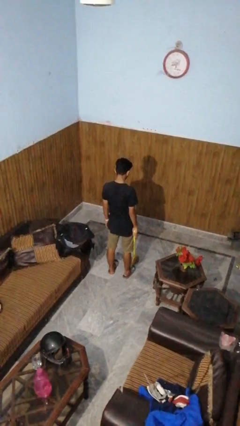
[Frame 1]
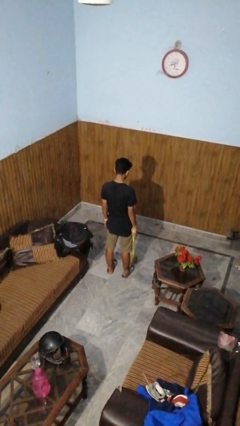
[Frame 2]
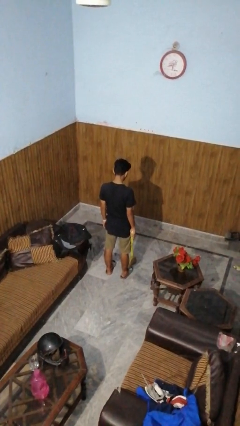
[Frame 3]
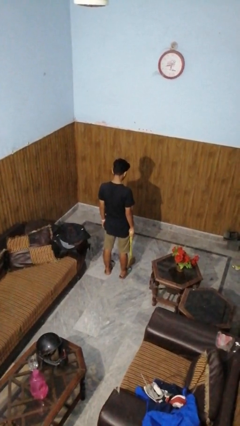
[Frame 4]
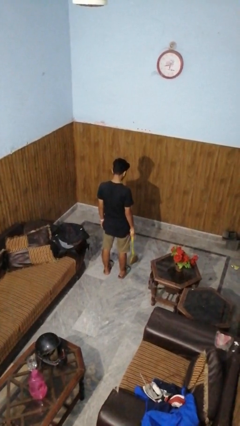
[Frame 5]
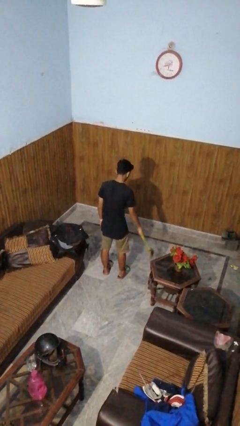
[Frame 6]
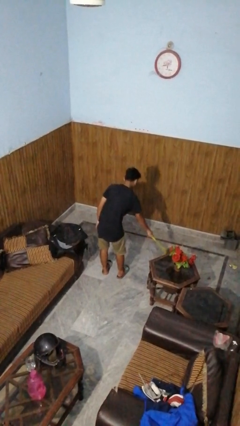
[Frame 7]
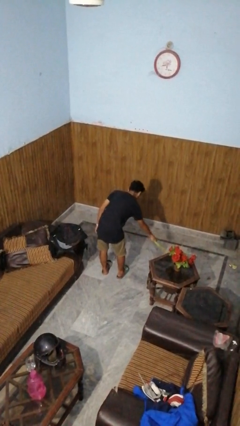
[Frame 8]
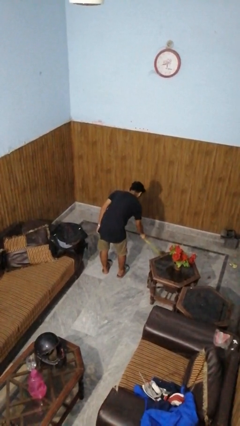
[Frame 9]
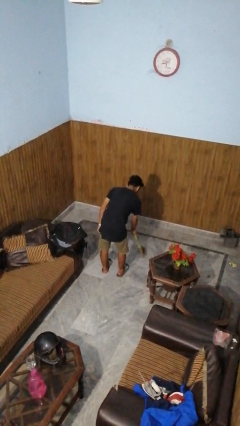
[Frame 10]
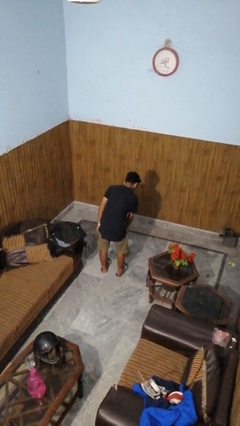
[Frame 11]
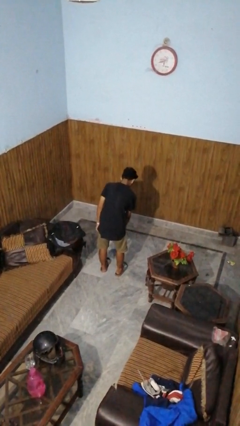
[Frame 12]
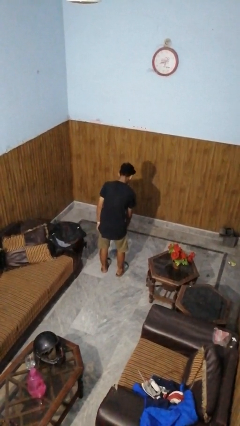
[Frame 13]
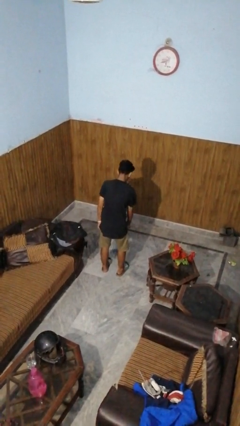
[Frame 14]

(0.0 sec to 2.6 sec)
person sweeps floor

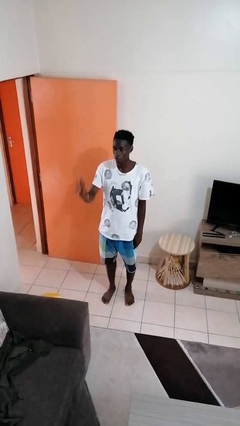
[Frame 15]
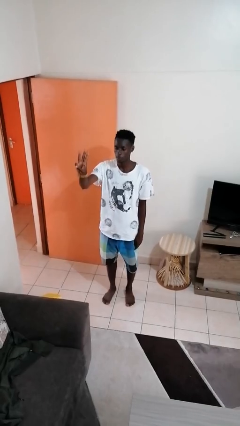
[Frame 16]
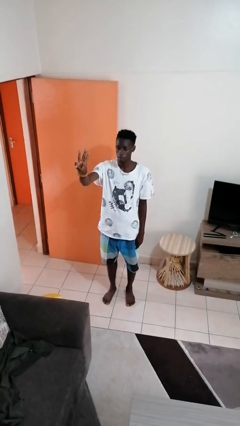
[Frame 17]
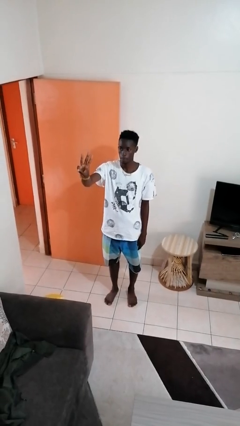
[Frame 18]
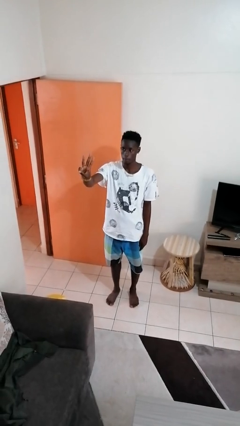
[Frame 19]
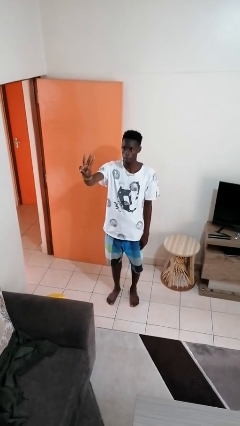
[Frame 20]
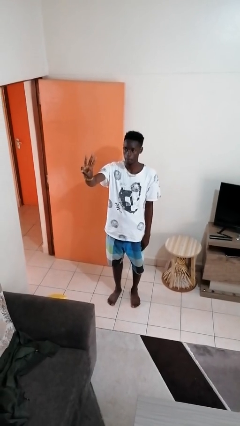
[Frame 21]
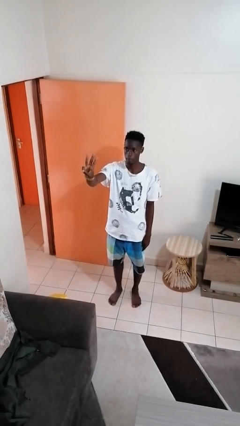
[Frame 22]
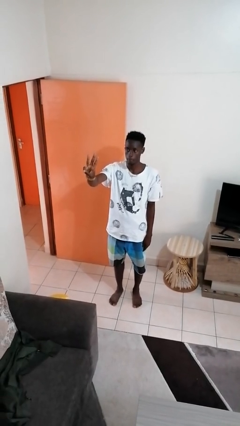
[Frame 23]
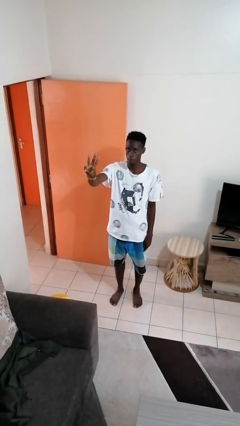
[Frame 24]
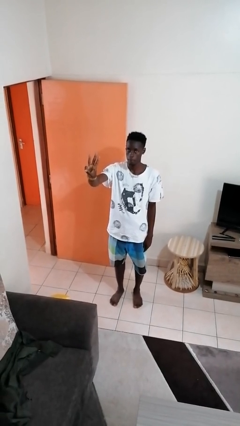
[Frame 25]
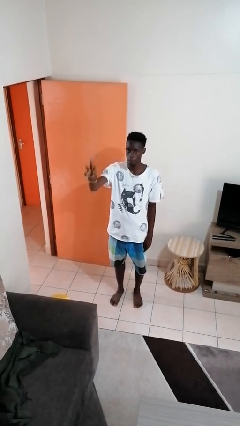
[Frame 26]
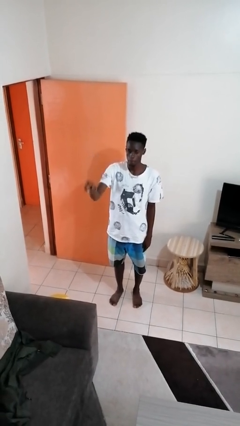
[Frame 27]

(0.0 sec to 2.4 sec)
person gestures number three

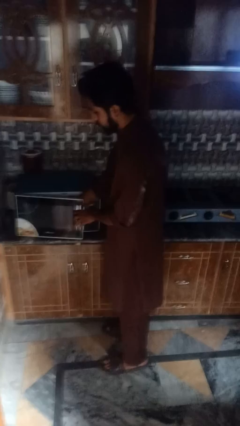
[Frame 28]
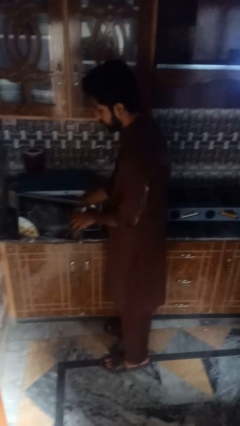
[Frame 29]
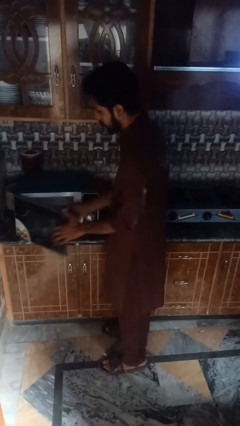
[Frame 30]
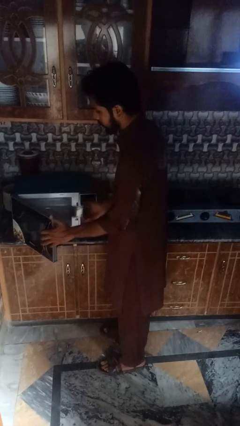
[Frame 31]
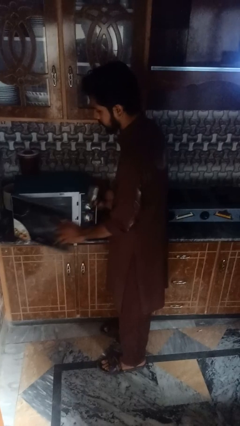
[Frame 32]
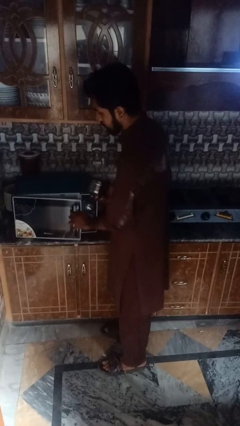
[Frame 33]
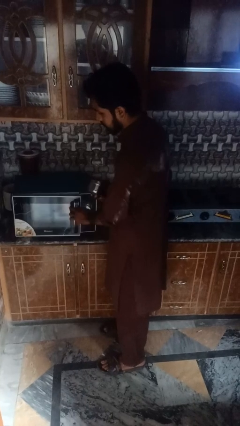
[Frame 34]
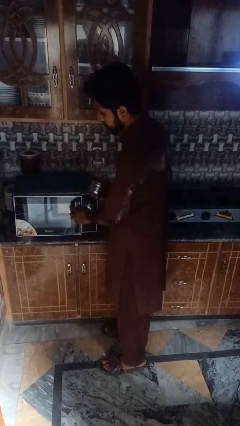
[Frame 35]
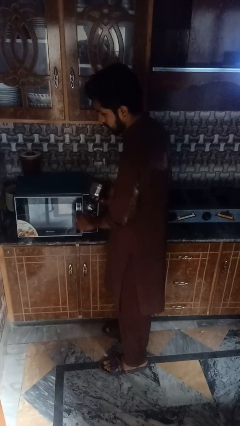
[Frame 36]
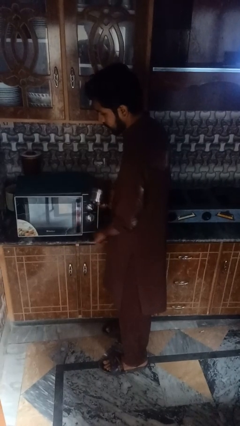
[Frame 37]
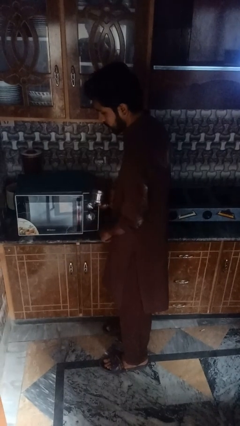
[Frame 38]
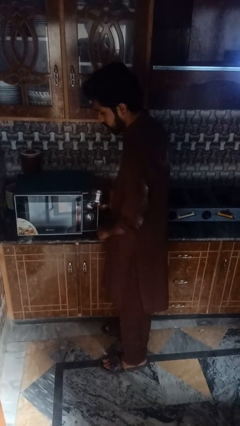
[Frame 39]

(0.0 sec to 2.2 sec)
person takes object from microwave

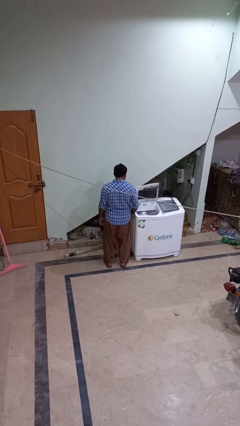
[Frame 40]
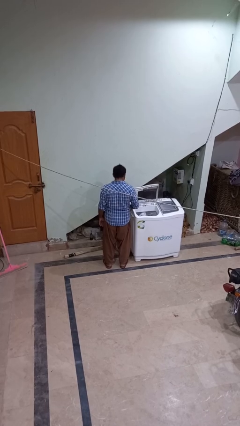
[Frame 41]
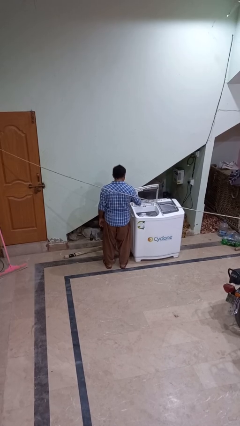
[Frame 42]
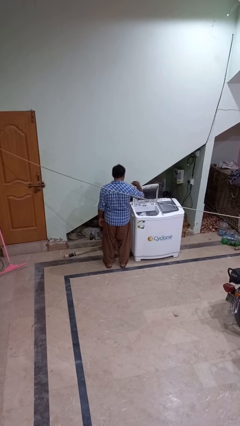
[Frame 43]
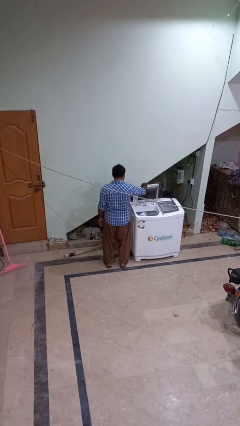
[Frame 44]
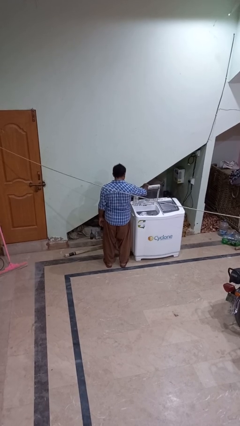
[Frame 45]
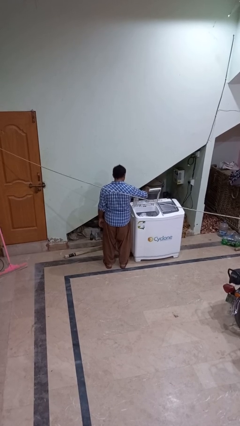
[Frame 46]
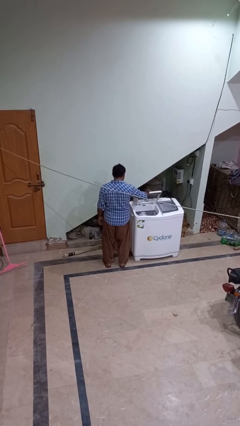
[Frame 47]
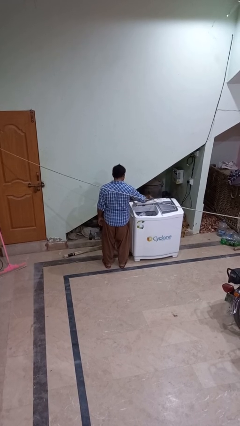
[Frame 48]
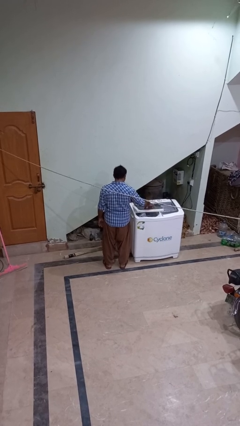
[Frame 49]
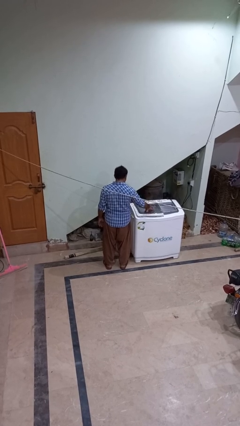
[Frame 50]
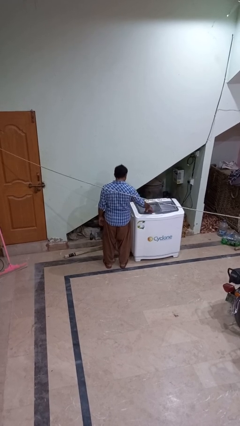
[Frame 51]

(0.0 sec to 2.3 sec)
person closes clothes washer

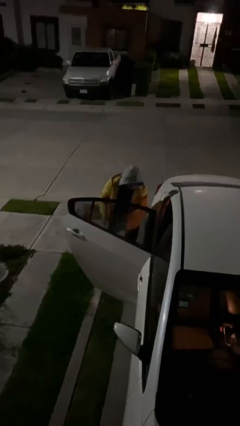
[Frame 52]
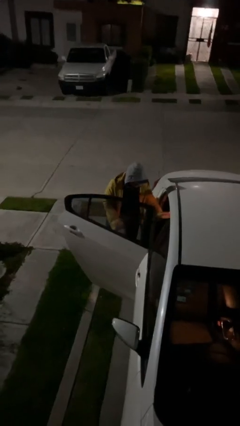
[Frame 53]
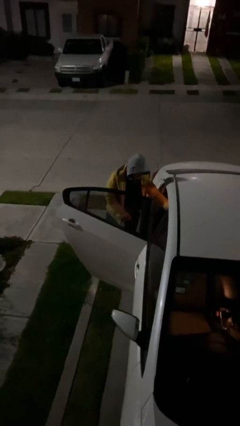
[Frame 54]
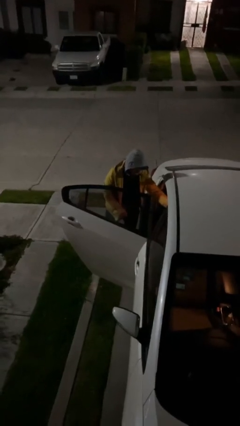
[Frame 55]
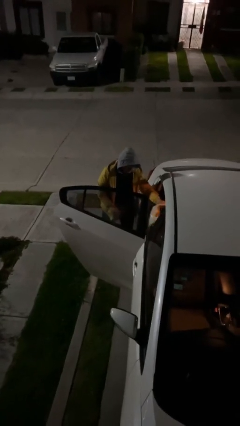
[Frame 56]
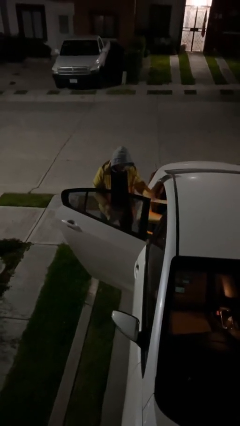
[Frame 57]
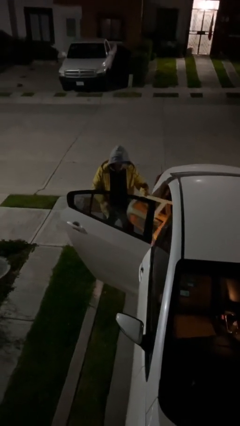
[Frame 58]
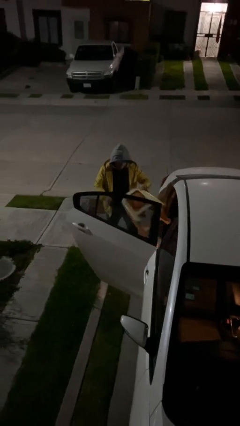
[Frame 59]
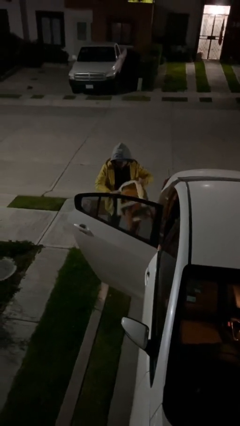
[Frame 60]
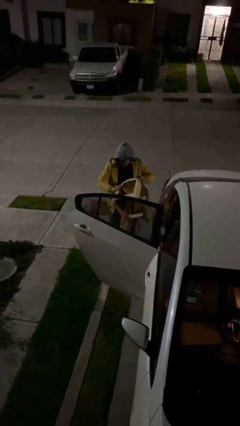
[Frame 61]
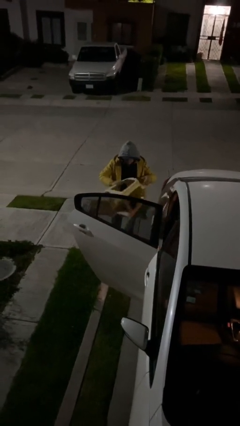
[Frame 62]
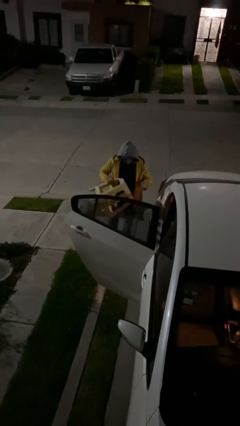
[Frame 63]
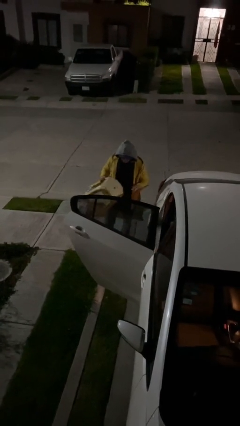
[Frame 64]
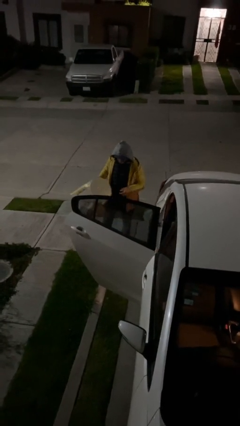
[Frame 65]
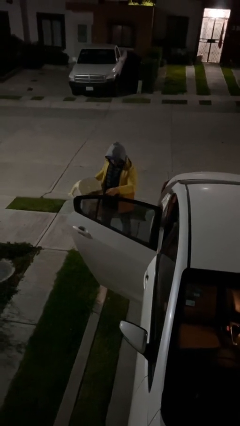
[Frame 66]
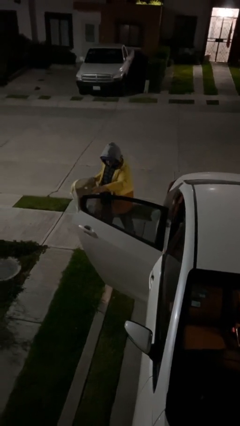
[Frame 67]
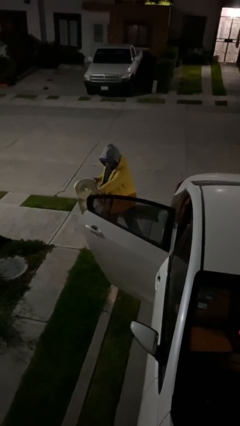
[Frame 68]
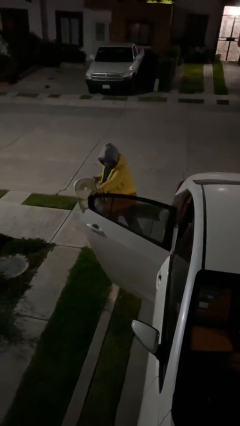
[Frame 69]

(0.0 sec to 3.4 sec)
person unloads car

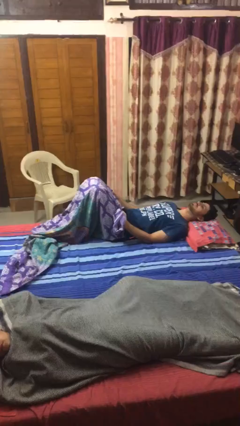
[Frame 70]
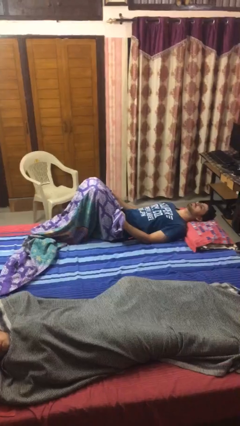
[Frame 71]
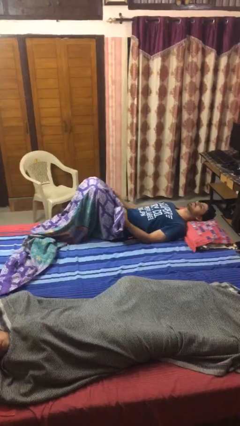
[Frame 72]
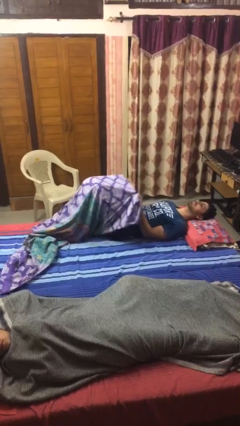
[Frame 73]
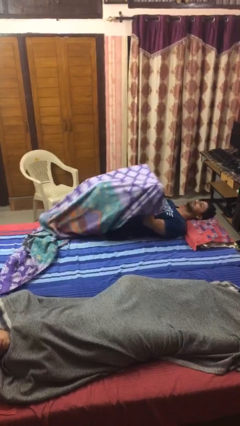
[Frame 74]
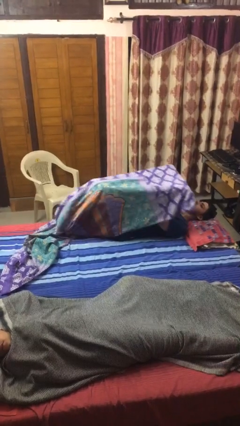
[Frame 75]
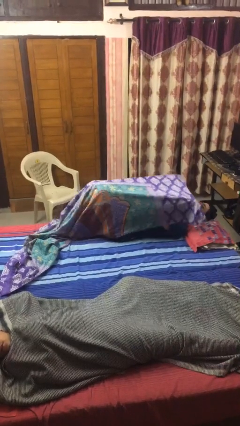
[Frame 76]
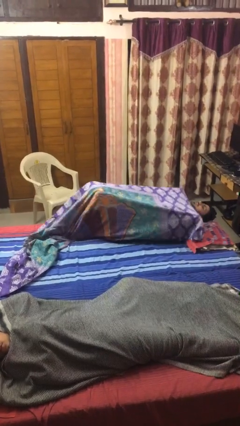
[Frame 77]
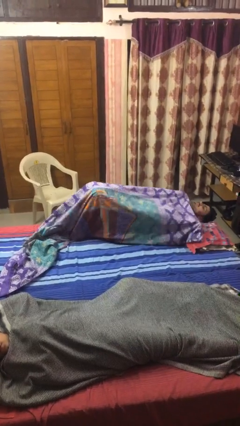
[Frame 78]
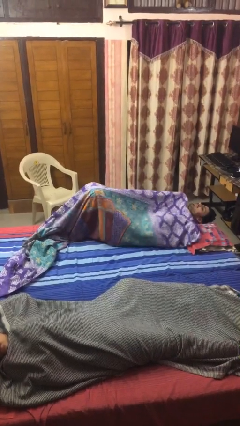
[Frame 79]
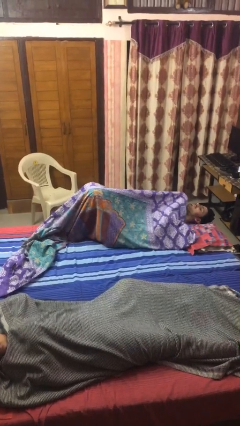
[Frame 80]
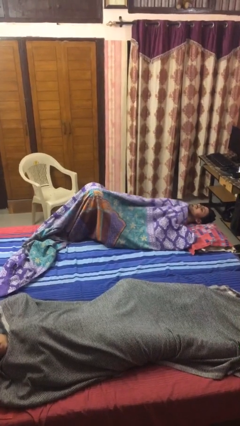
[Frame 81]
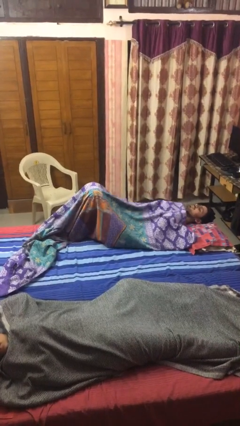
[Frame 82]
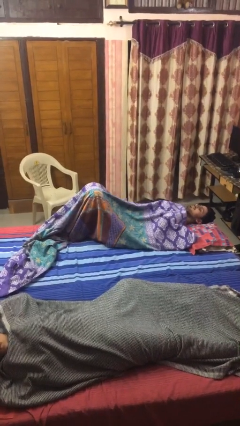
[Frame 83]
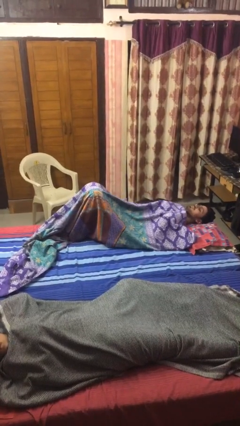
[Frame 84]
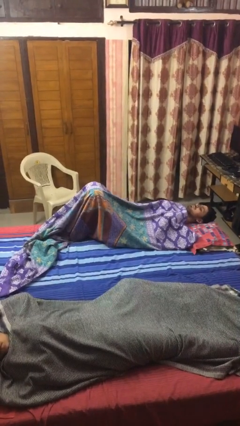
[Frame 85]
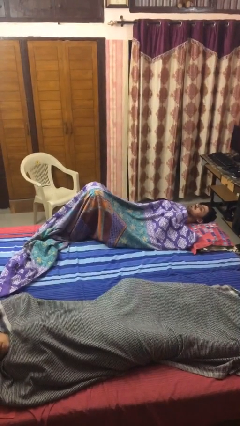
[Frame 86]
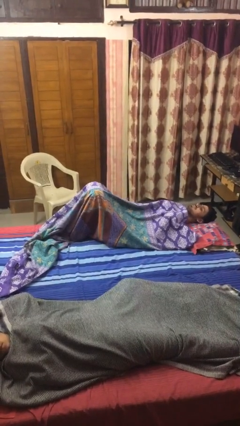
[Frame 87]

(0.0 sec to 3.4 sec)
person covers with bedsheets

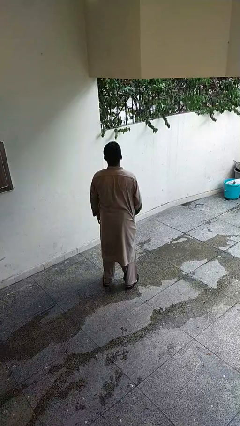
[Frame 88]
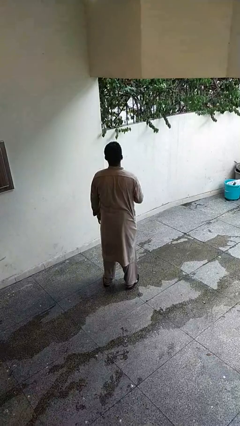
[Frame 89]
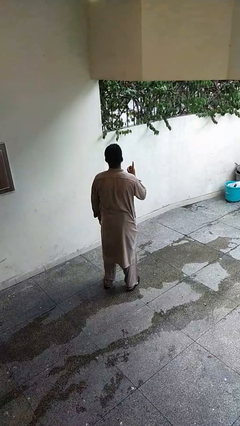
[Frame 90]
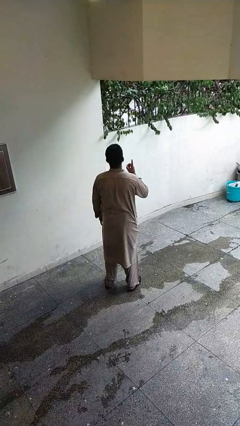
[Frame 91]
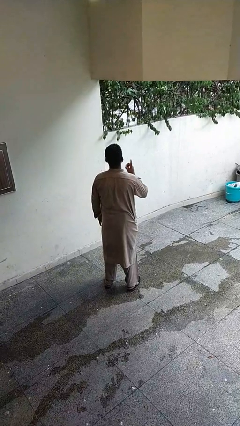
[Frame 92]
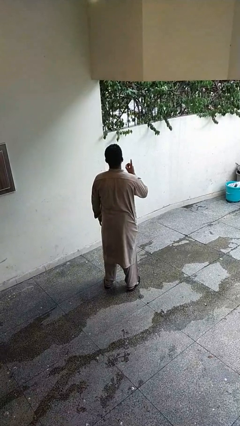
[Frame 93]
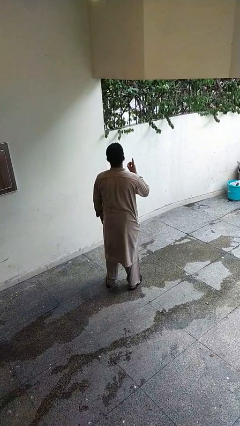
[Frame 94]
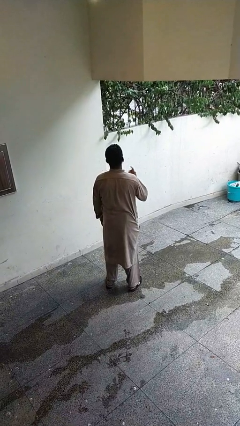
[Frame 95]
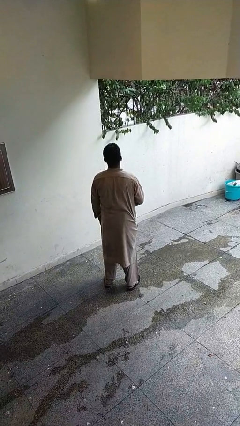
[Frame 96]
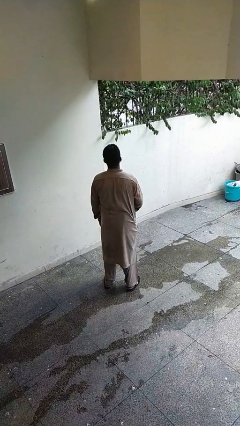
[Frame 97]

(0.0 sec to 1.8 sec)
person gestures number one
